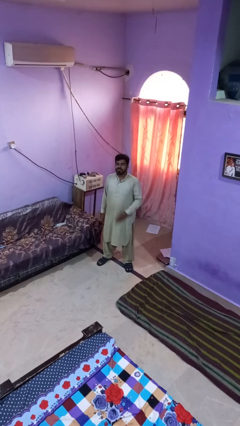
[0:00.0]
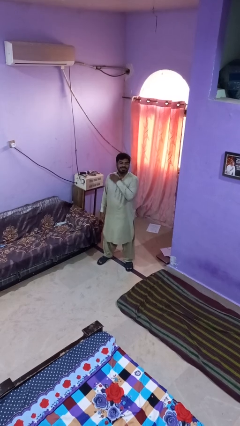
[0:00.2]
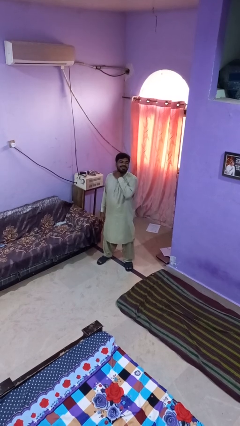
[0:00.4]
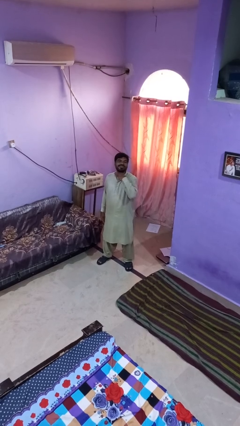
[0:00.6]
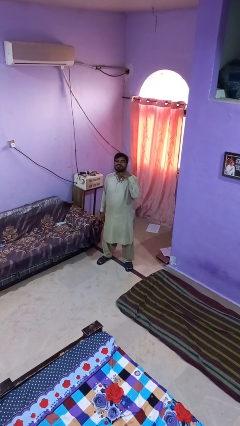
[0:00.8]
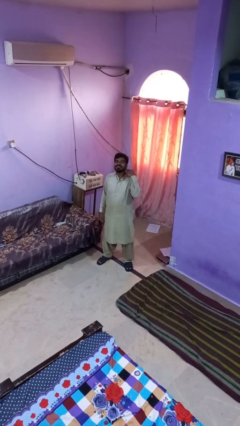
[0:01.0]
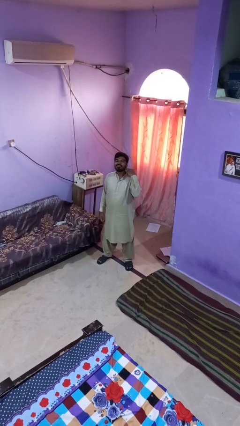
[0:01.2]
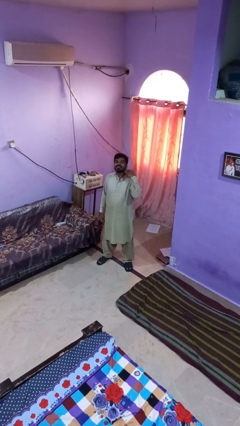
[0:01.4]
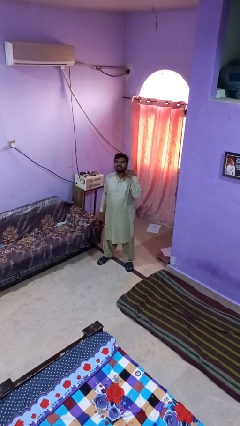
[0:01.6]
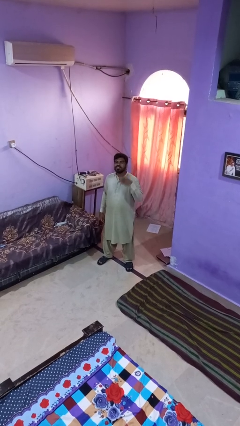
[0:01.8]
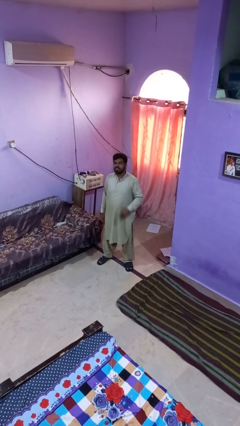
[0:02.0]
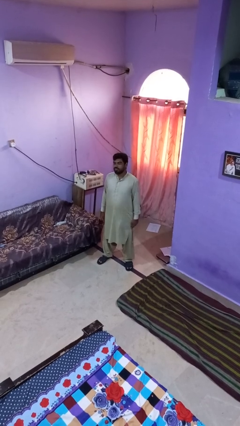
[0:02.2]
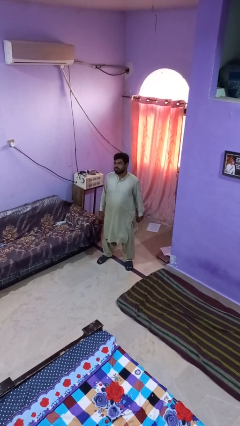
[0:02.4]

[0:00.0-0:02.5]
person gestures cut

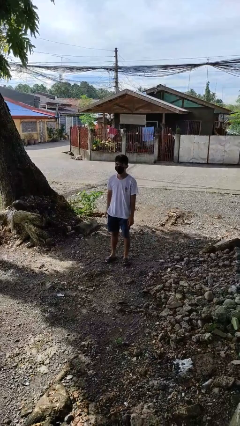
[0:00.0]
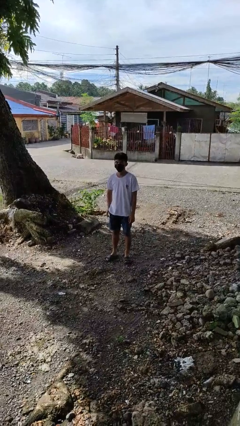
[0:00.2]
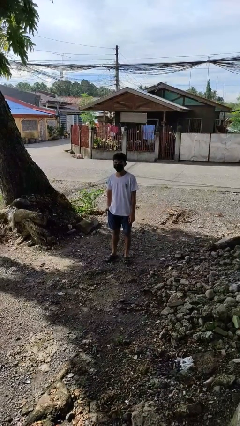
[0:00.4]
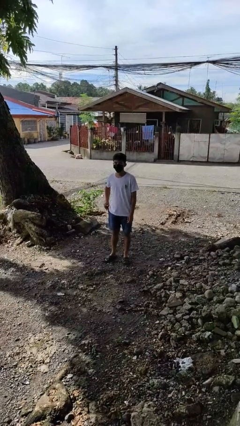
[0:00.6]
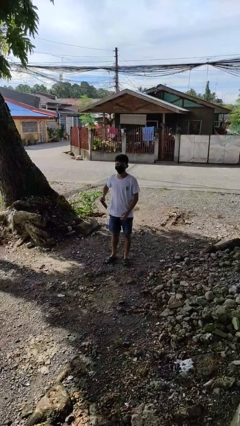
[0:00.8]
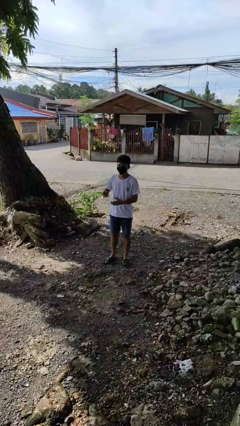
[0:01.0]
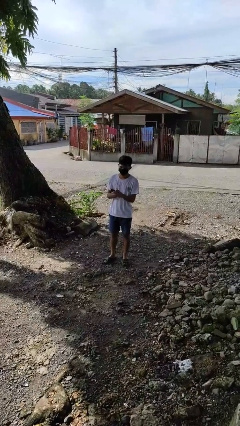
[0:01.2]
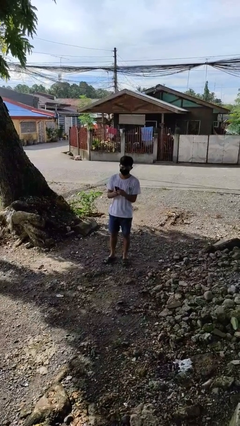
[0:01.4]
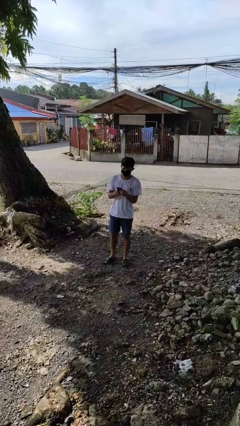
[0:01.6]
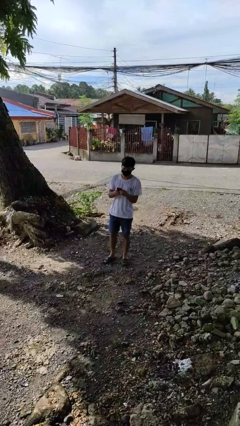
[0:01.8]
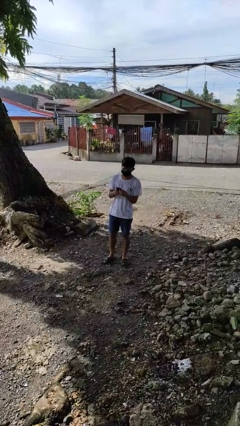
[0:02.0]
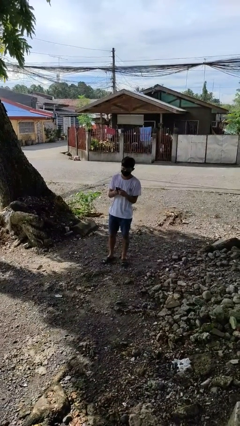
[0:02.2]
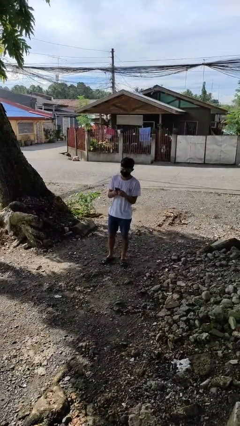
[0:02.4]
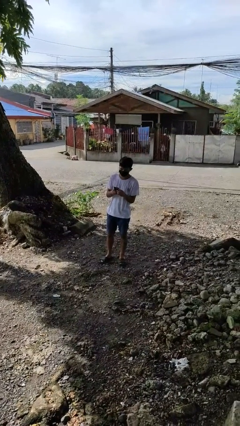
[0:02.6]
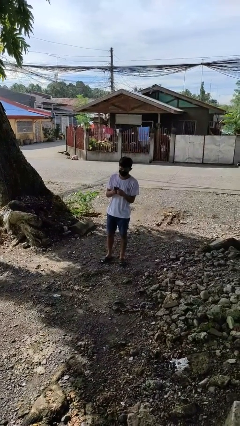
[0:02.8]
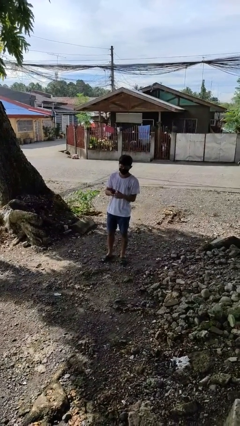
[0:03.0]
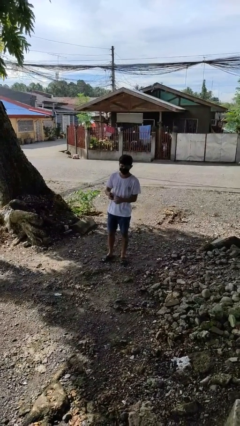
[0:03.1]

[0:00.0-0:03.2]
person takes phone from pocket

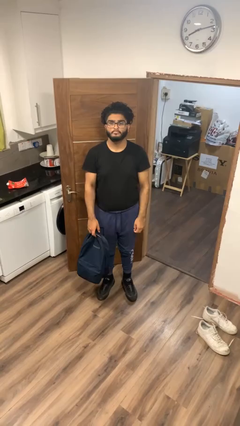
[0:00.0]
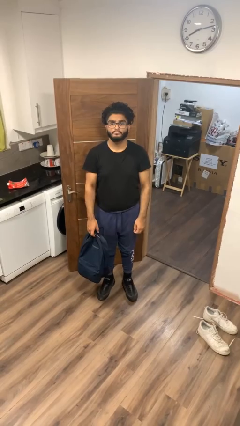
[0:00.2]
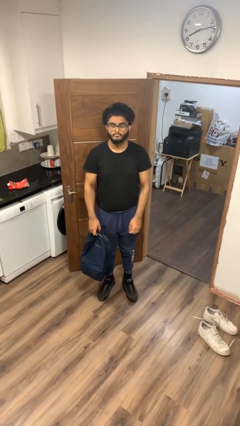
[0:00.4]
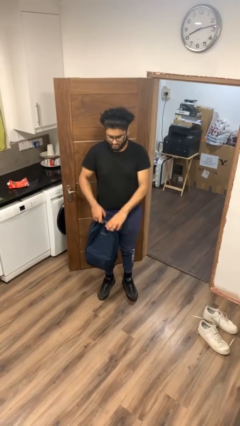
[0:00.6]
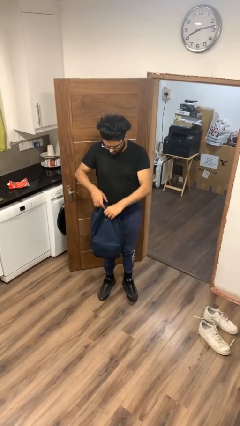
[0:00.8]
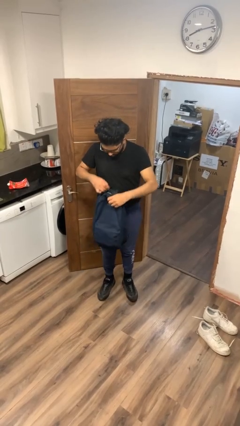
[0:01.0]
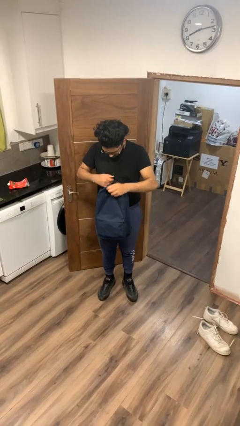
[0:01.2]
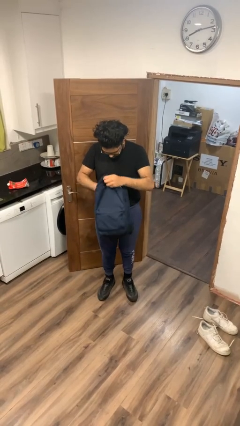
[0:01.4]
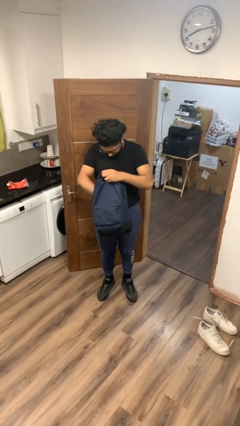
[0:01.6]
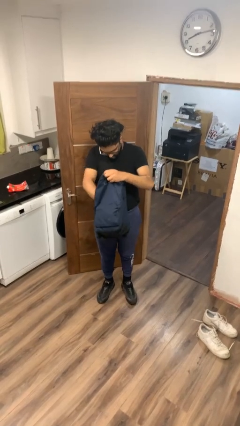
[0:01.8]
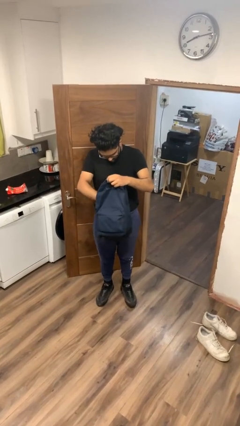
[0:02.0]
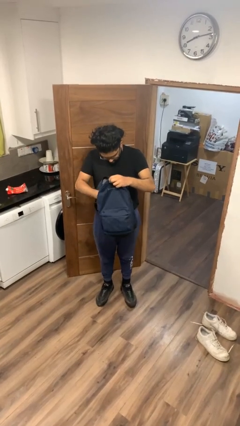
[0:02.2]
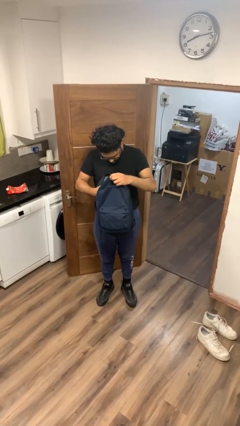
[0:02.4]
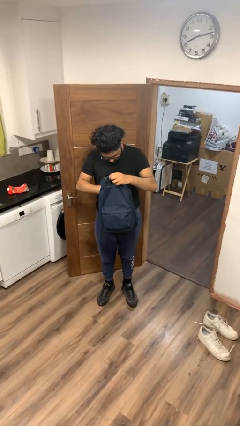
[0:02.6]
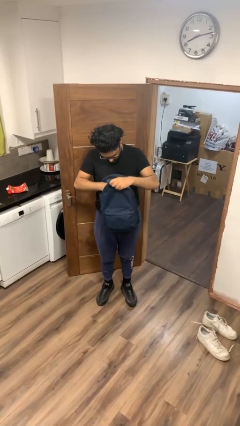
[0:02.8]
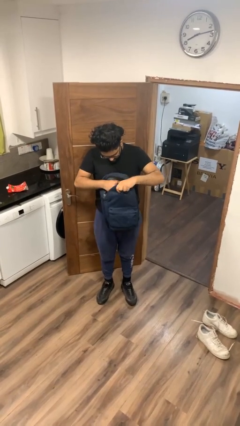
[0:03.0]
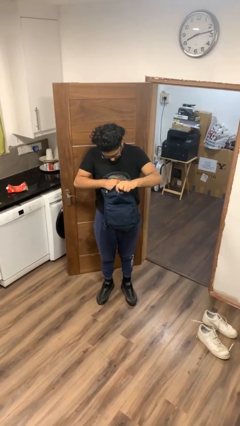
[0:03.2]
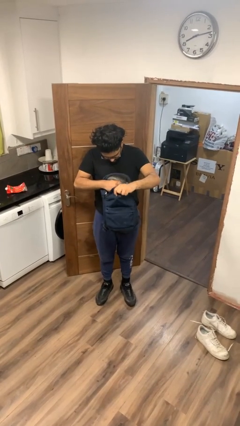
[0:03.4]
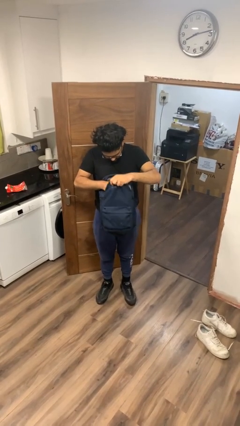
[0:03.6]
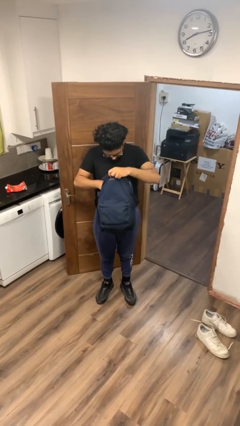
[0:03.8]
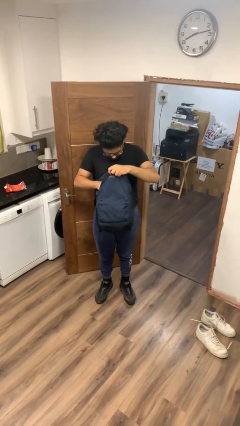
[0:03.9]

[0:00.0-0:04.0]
person searches in backpack

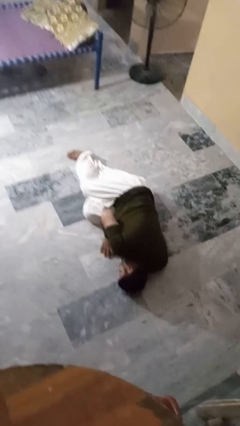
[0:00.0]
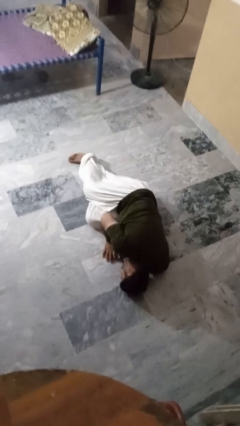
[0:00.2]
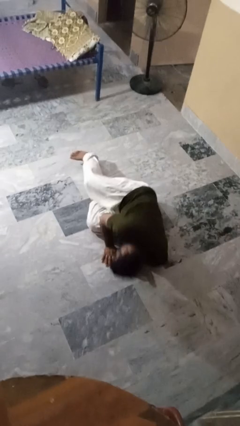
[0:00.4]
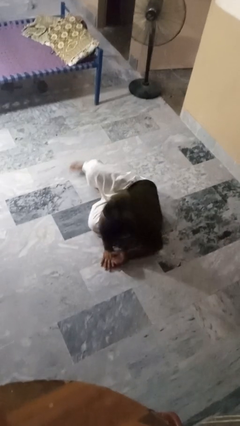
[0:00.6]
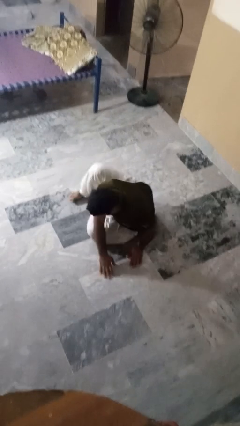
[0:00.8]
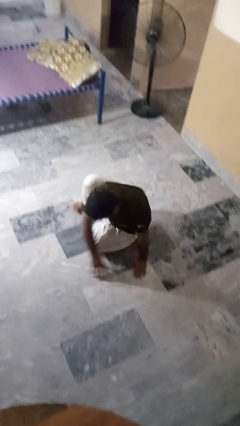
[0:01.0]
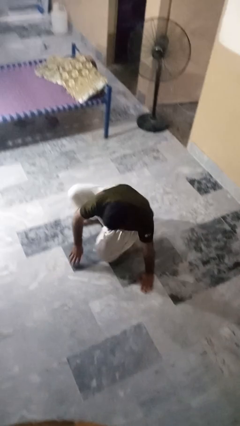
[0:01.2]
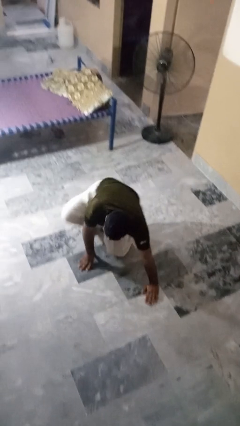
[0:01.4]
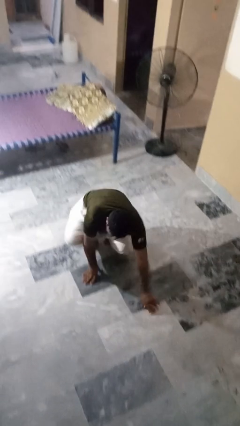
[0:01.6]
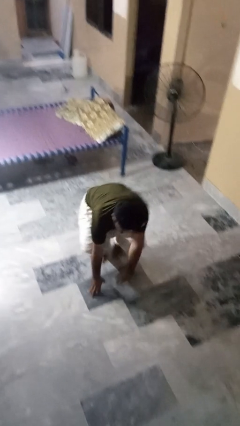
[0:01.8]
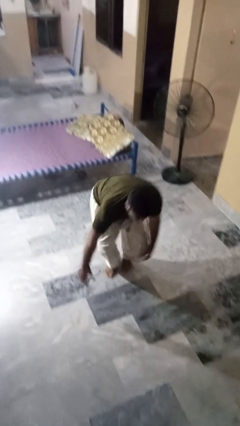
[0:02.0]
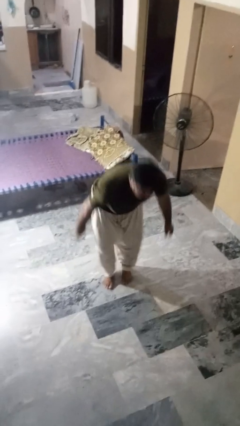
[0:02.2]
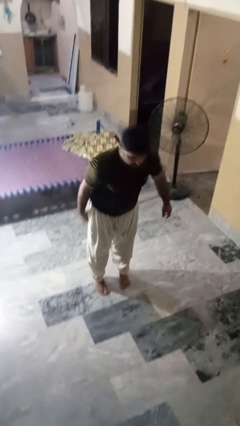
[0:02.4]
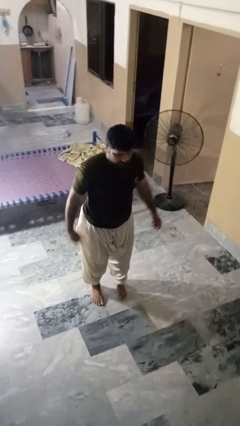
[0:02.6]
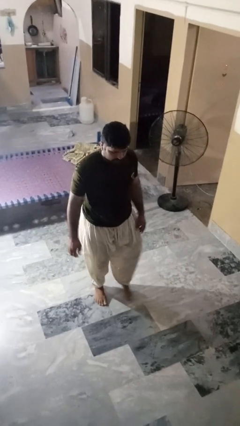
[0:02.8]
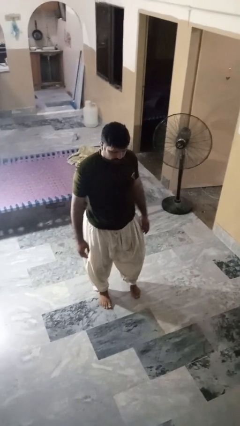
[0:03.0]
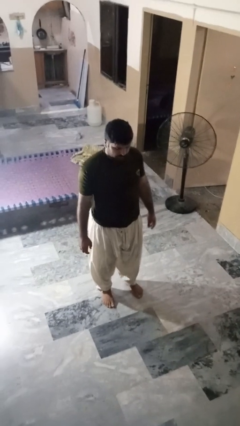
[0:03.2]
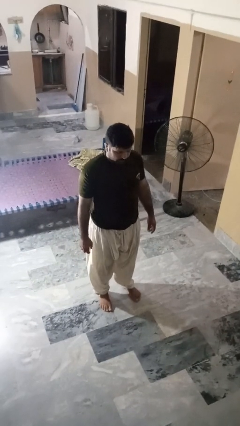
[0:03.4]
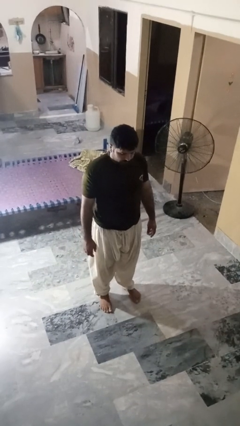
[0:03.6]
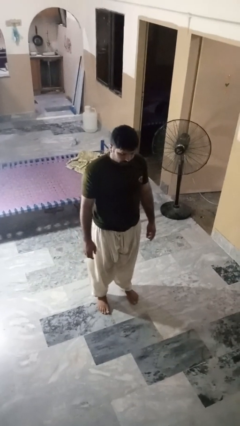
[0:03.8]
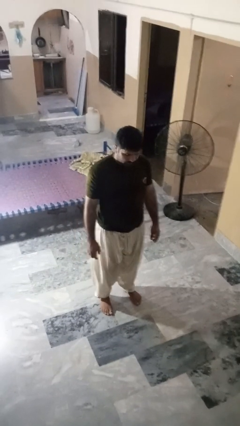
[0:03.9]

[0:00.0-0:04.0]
person stands up from floor

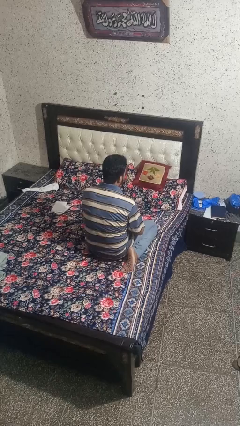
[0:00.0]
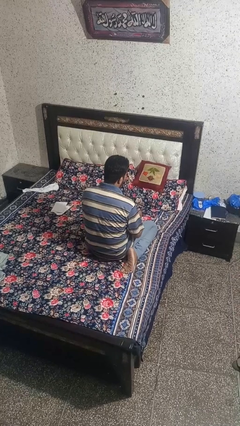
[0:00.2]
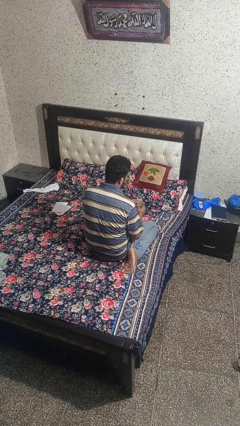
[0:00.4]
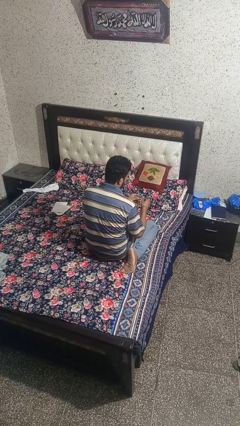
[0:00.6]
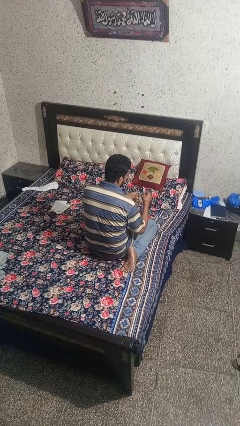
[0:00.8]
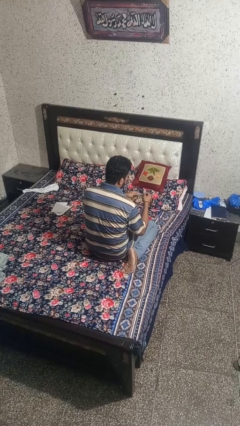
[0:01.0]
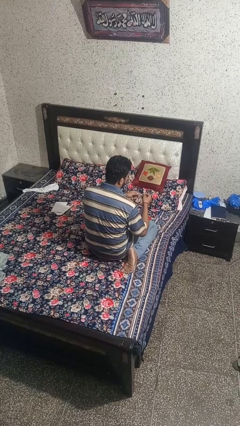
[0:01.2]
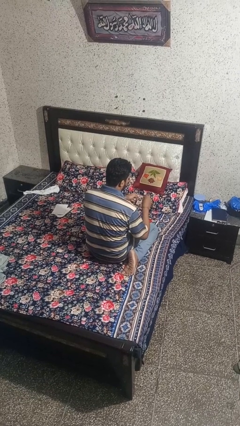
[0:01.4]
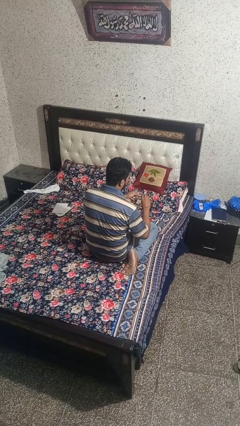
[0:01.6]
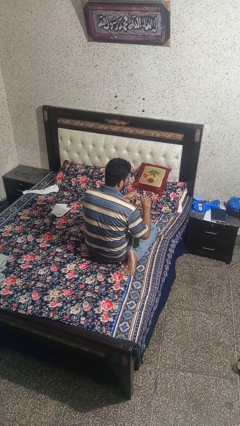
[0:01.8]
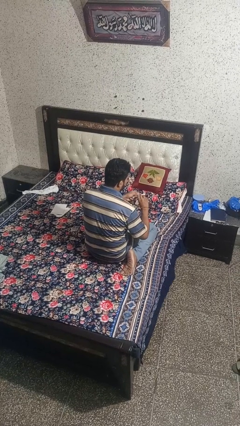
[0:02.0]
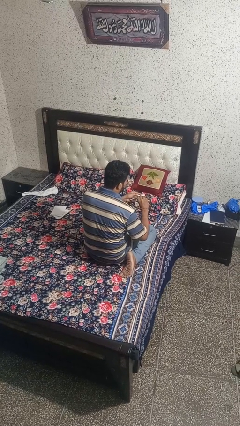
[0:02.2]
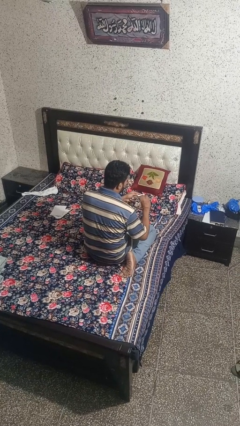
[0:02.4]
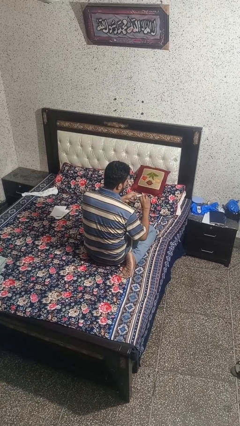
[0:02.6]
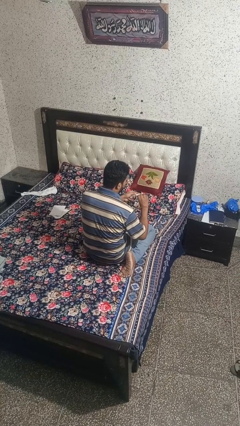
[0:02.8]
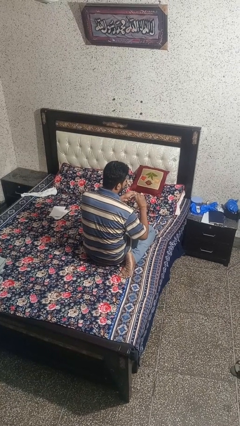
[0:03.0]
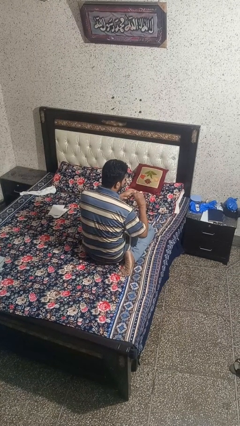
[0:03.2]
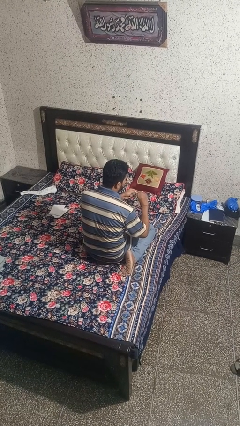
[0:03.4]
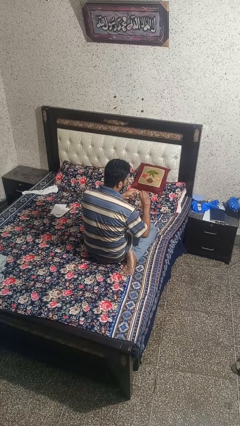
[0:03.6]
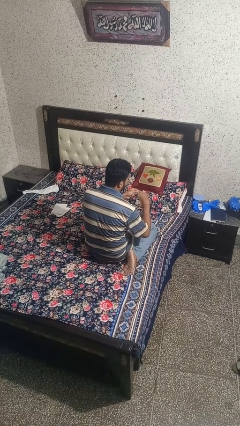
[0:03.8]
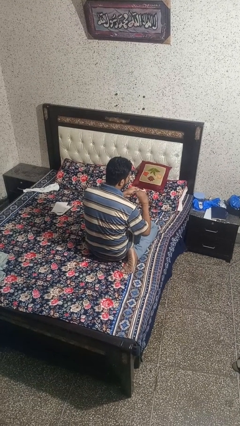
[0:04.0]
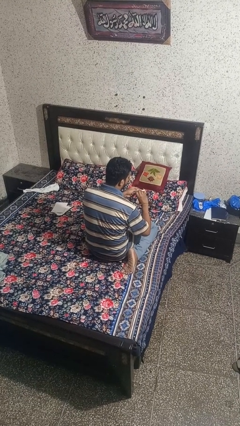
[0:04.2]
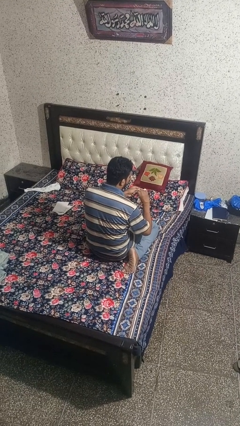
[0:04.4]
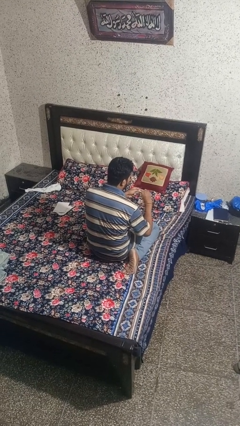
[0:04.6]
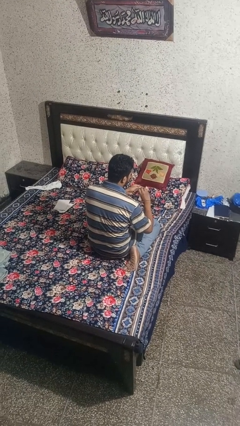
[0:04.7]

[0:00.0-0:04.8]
person files fingernails
